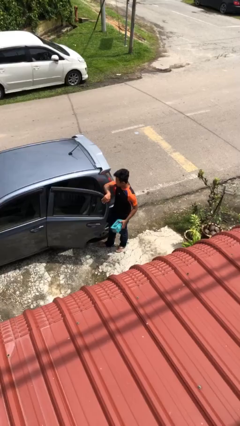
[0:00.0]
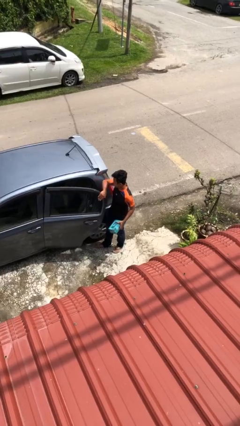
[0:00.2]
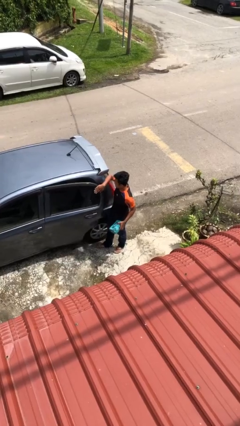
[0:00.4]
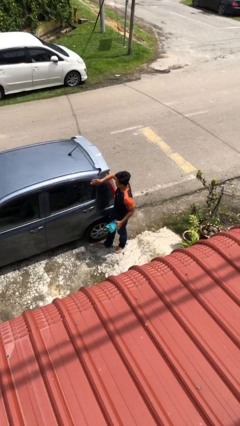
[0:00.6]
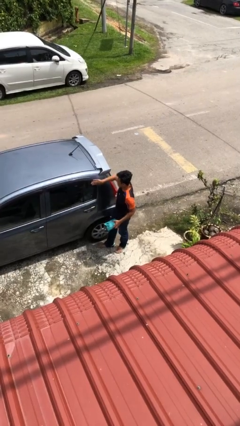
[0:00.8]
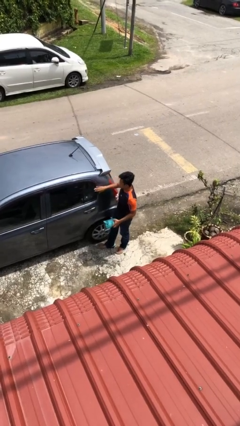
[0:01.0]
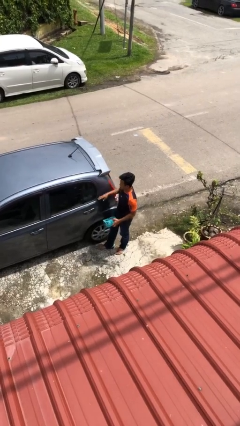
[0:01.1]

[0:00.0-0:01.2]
person closes car door

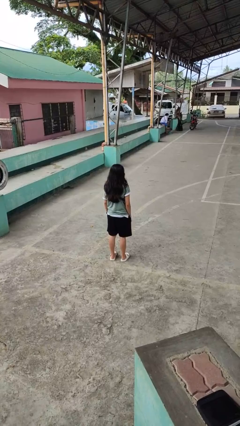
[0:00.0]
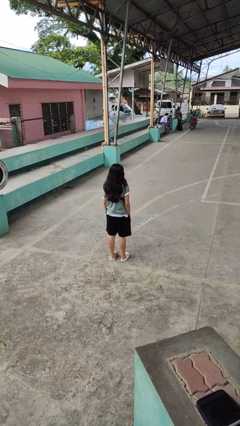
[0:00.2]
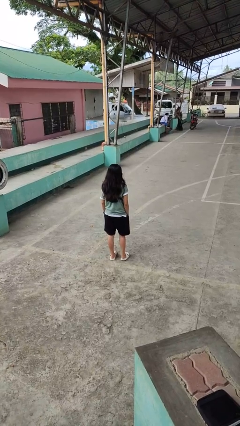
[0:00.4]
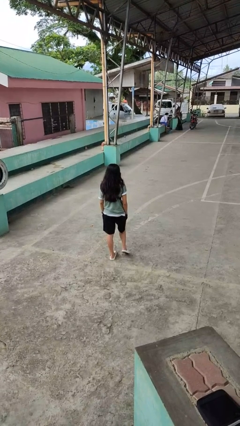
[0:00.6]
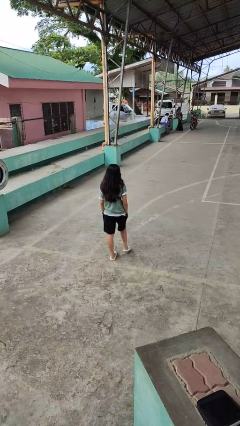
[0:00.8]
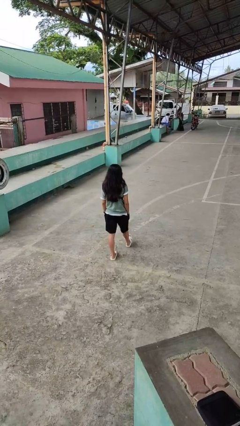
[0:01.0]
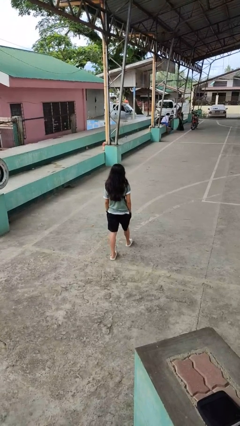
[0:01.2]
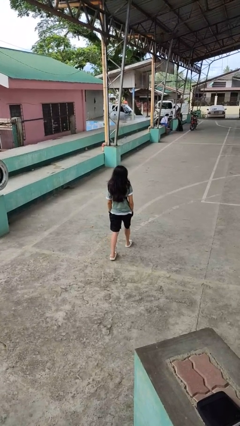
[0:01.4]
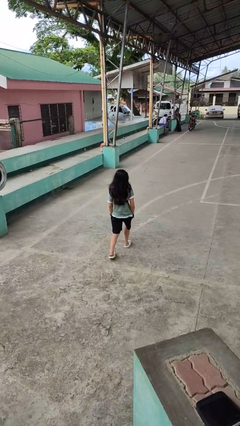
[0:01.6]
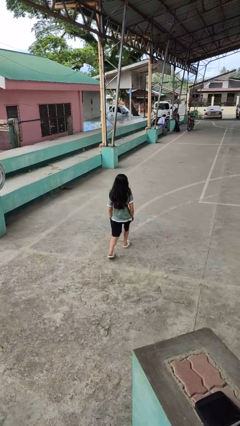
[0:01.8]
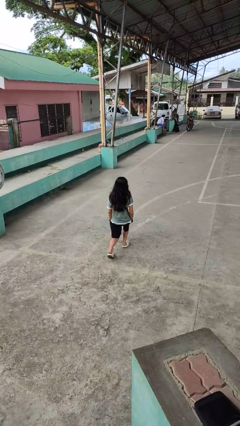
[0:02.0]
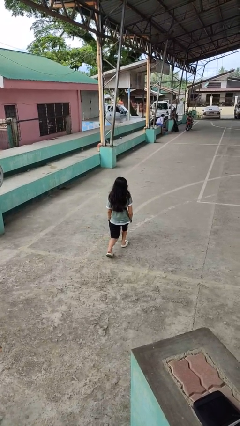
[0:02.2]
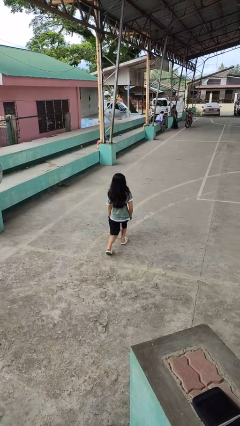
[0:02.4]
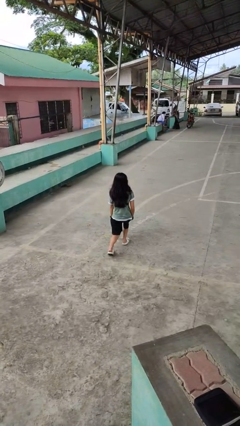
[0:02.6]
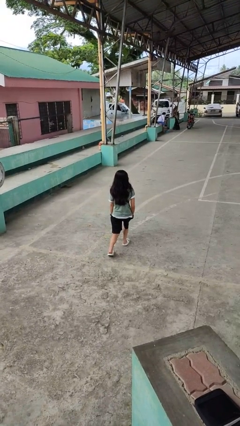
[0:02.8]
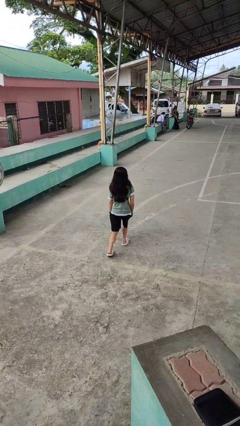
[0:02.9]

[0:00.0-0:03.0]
person exercises with lunges

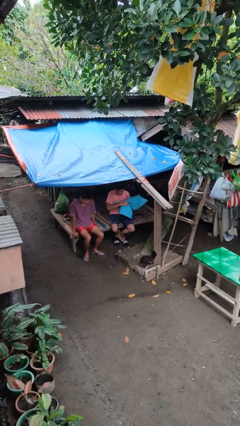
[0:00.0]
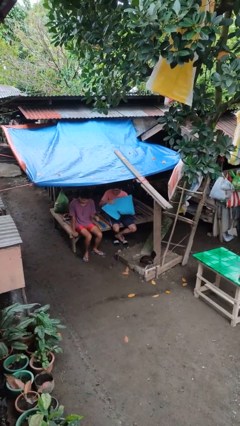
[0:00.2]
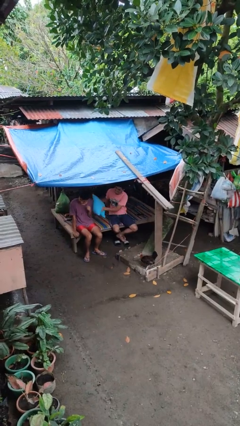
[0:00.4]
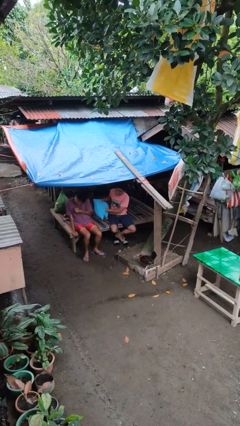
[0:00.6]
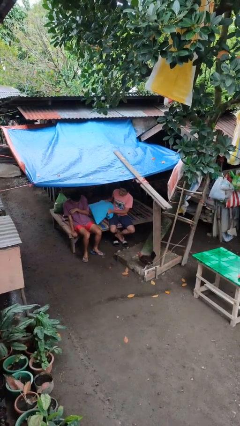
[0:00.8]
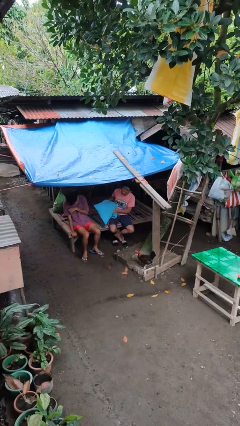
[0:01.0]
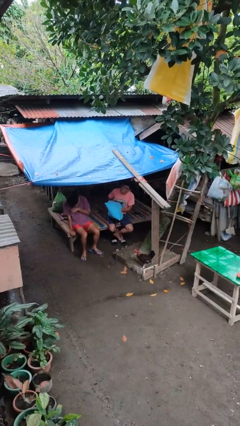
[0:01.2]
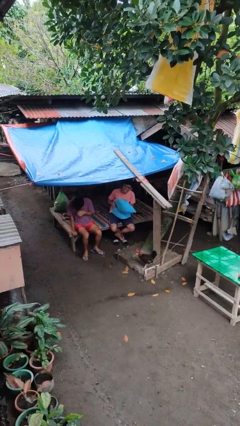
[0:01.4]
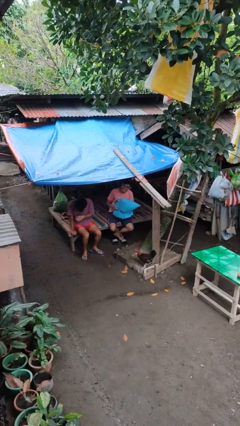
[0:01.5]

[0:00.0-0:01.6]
person hits person with pillow

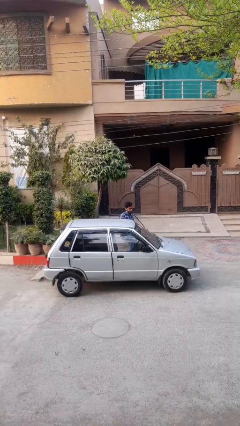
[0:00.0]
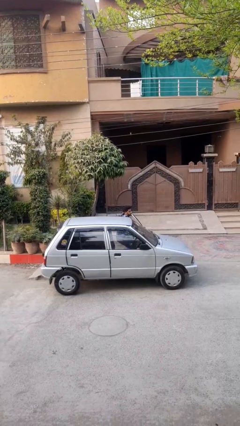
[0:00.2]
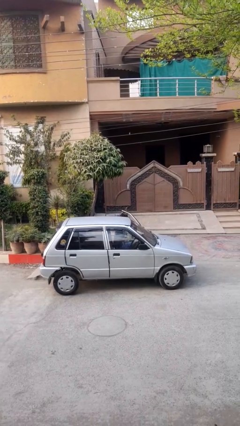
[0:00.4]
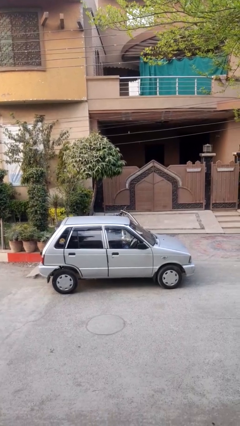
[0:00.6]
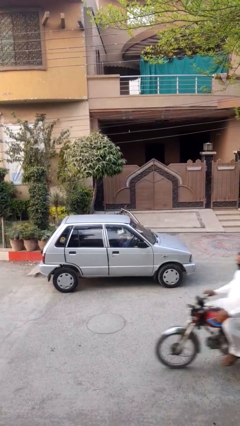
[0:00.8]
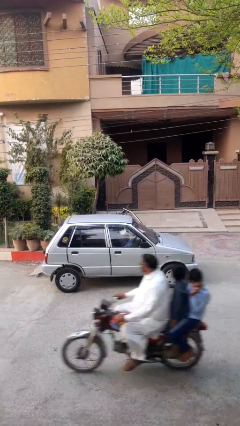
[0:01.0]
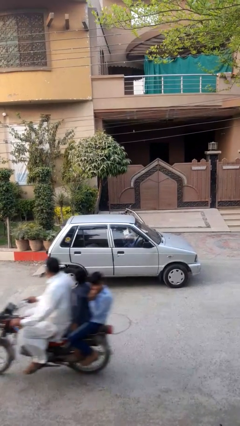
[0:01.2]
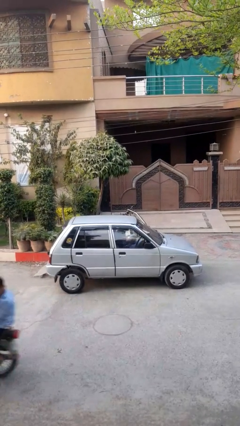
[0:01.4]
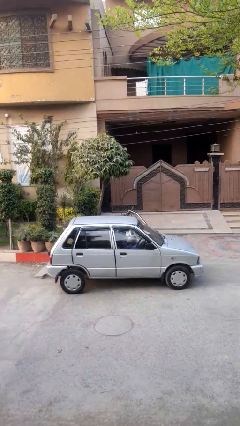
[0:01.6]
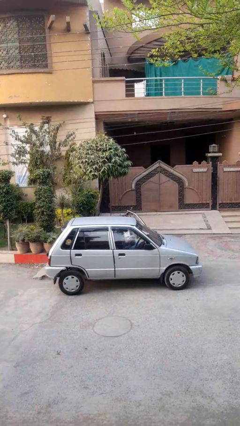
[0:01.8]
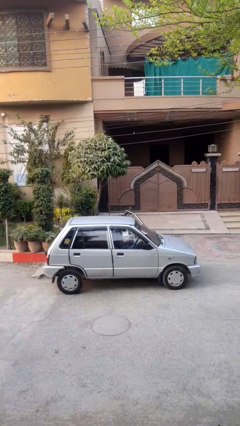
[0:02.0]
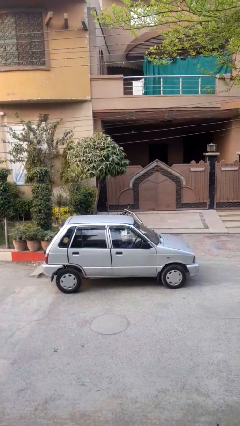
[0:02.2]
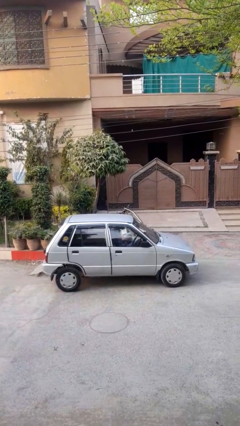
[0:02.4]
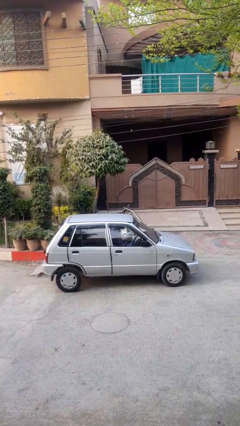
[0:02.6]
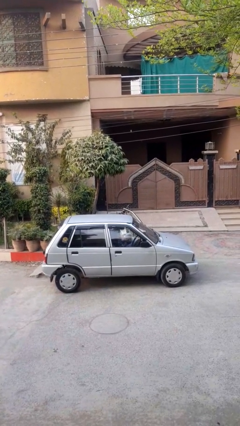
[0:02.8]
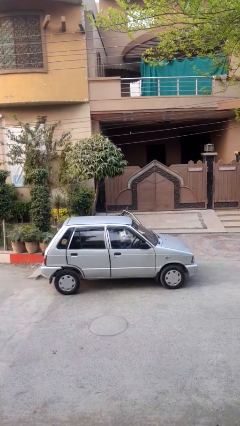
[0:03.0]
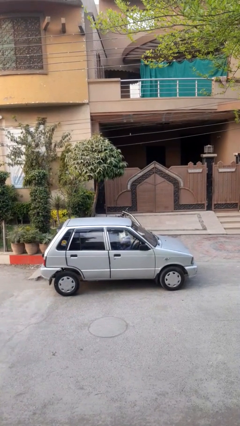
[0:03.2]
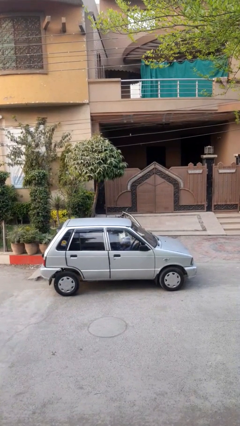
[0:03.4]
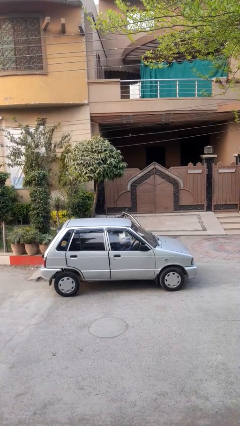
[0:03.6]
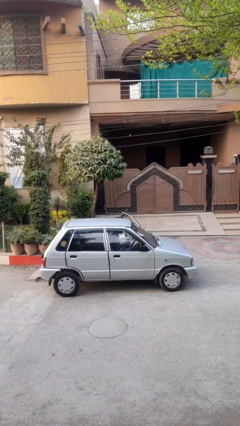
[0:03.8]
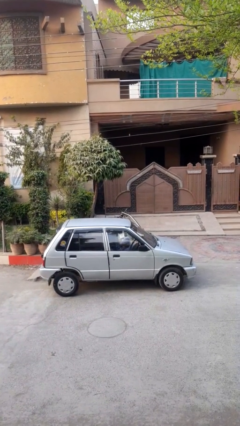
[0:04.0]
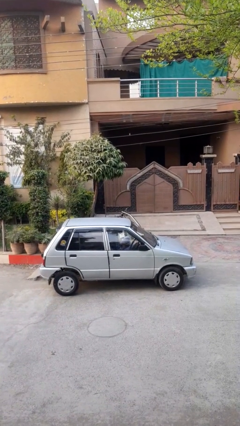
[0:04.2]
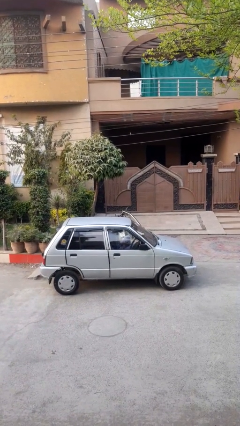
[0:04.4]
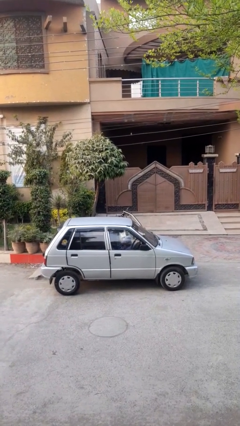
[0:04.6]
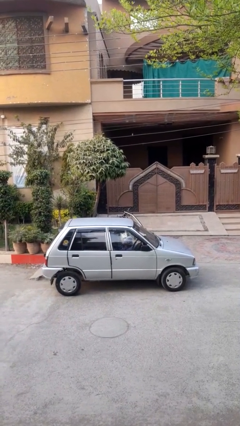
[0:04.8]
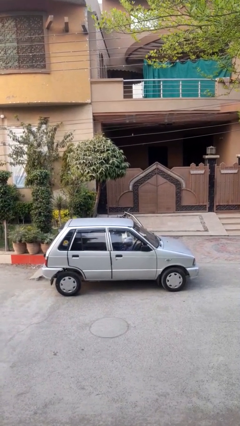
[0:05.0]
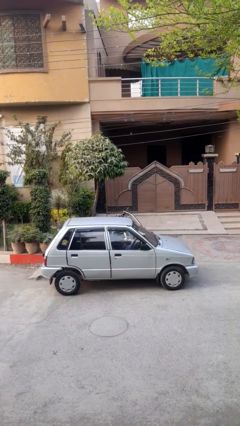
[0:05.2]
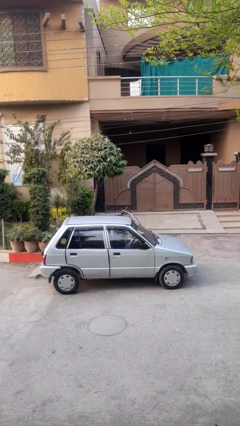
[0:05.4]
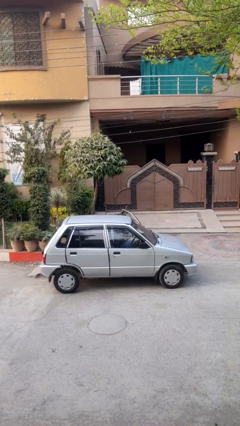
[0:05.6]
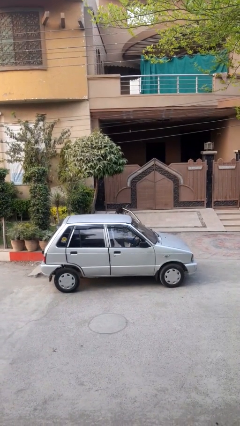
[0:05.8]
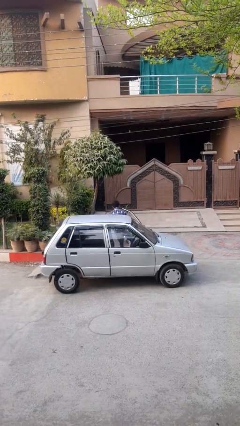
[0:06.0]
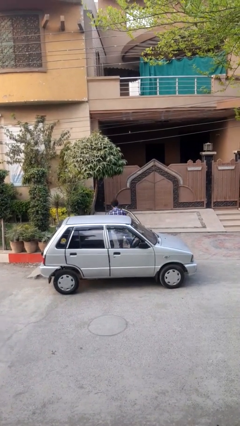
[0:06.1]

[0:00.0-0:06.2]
person enters car

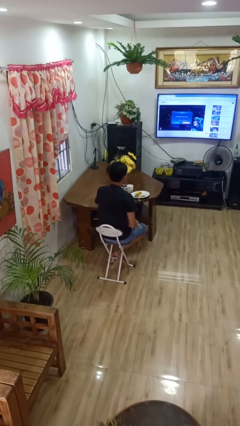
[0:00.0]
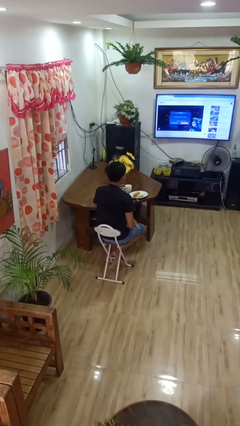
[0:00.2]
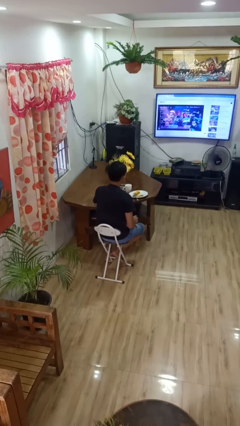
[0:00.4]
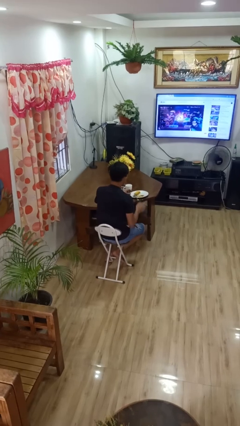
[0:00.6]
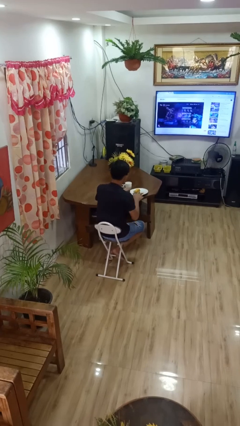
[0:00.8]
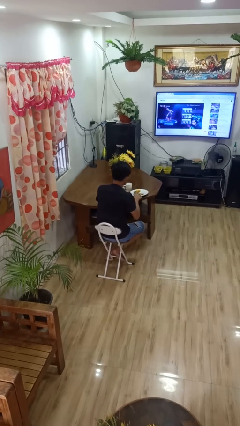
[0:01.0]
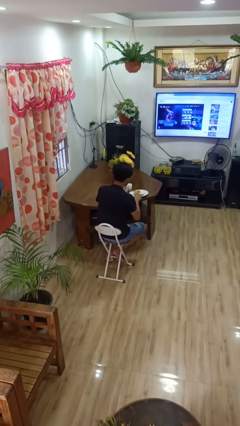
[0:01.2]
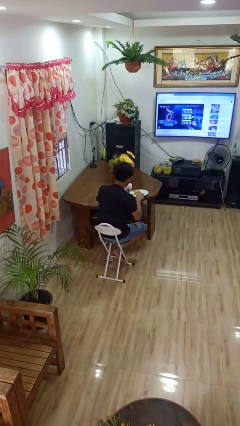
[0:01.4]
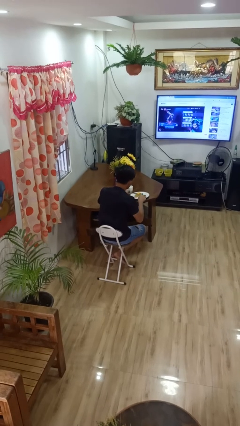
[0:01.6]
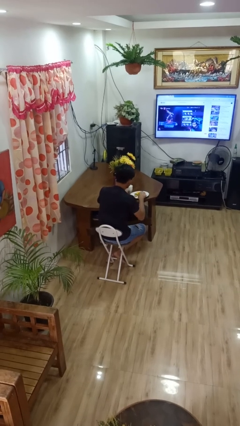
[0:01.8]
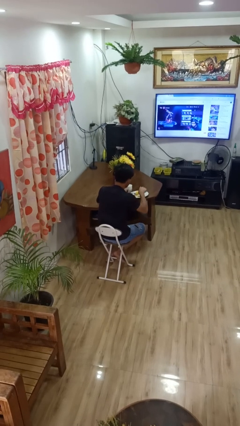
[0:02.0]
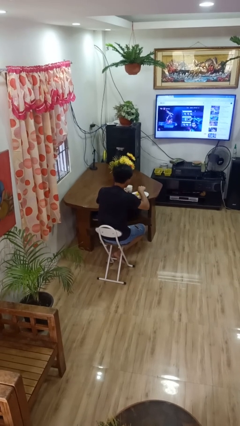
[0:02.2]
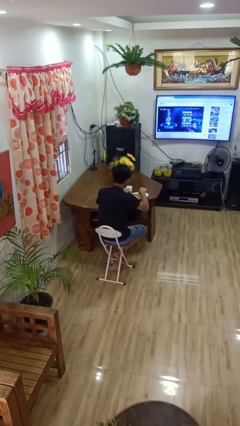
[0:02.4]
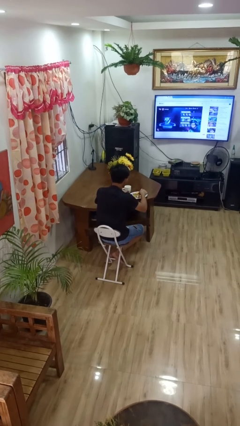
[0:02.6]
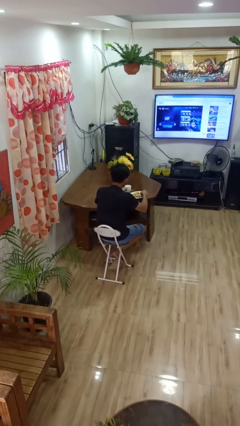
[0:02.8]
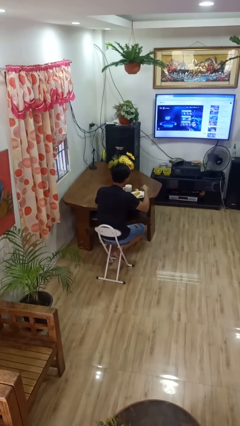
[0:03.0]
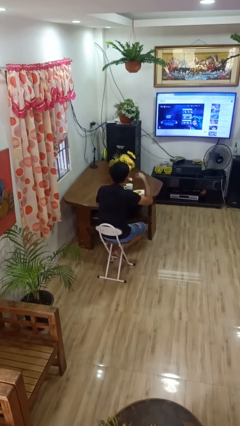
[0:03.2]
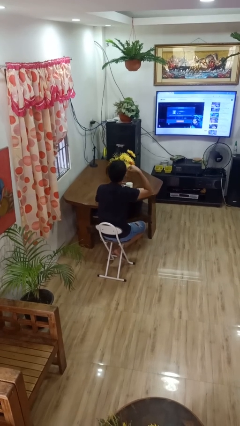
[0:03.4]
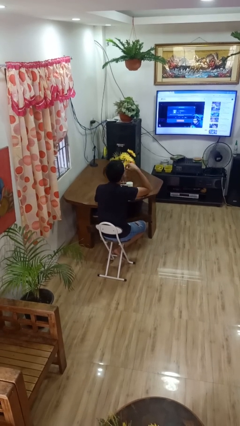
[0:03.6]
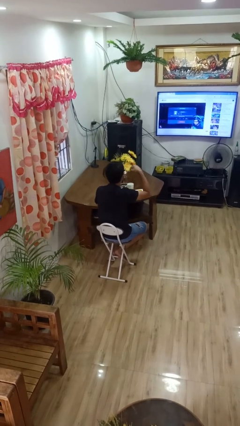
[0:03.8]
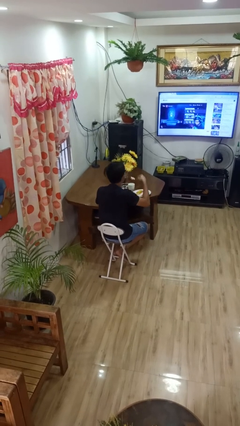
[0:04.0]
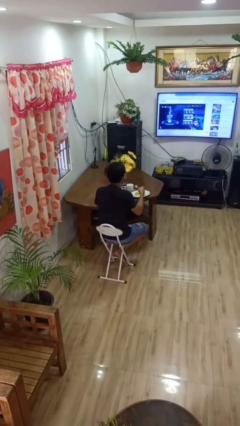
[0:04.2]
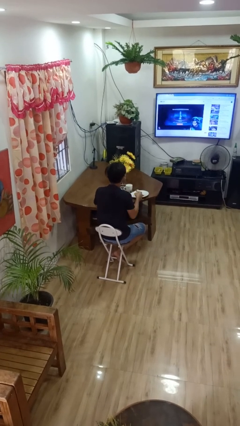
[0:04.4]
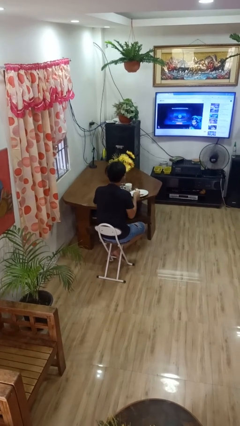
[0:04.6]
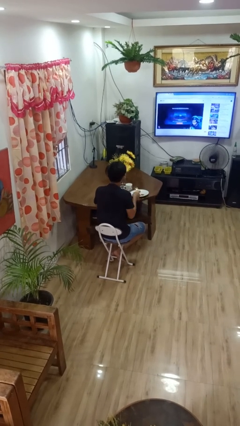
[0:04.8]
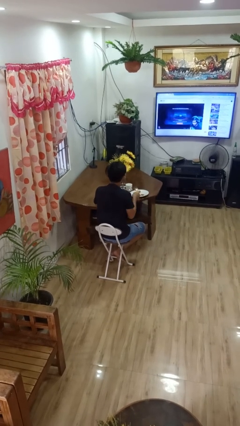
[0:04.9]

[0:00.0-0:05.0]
person eats with utensil

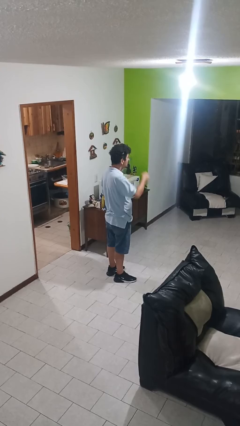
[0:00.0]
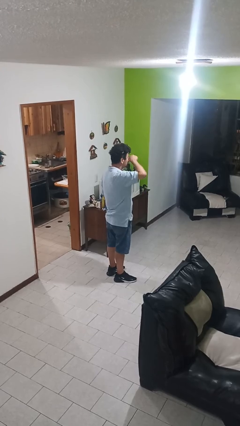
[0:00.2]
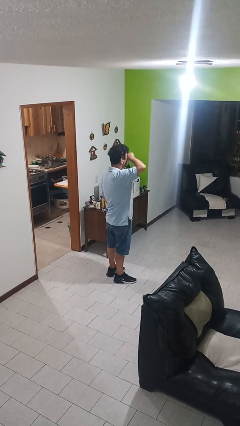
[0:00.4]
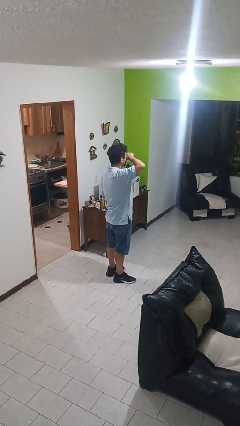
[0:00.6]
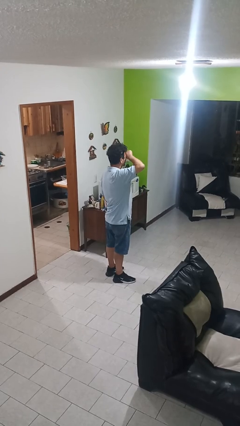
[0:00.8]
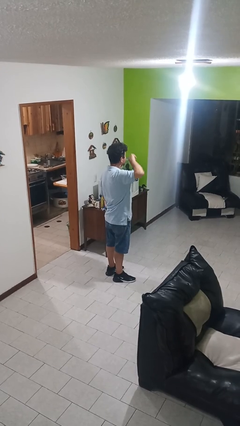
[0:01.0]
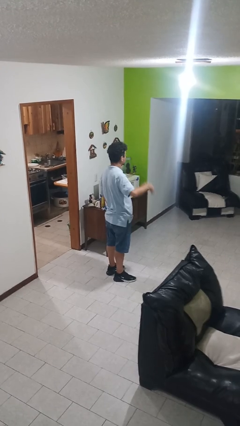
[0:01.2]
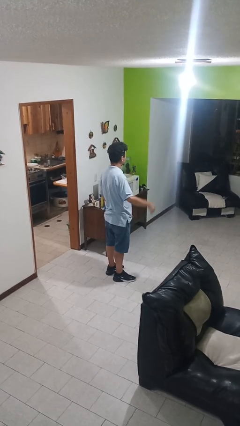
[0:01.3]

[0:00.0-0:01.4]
person rubs eyes
